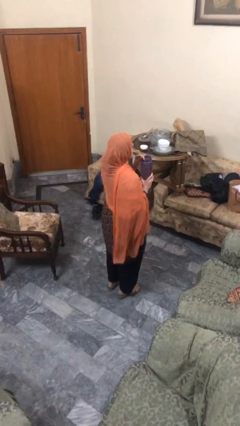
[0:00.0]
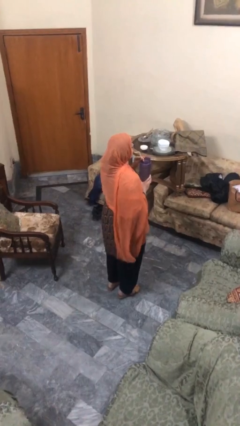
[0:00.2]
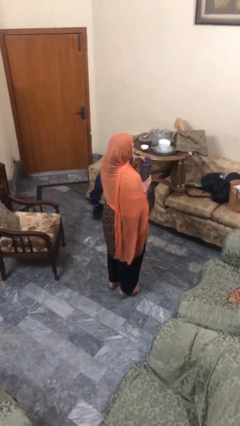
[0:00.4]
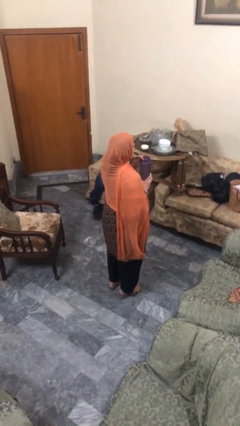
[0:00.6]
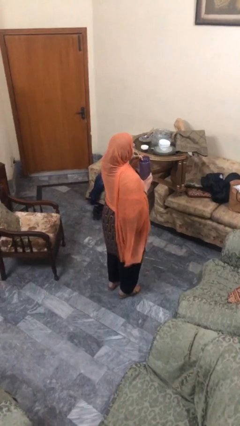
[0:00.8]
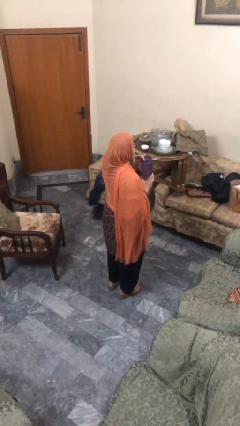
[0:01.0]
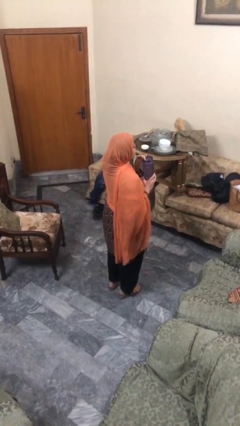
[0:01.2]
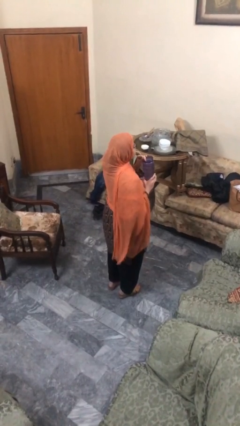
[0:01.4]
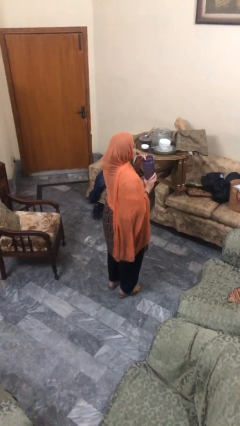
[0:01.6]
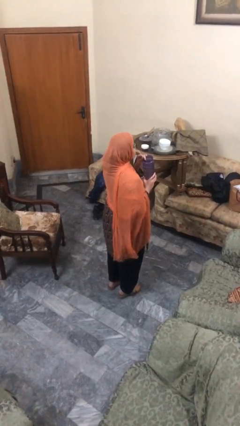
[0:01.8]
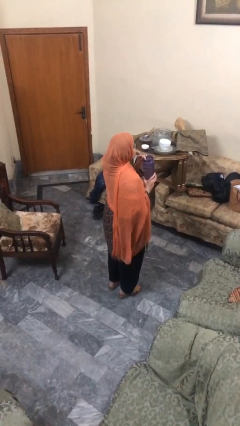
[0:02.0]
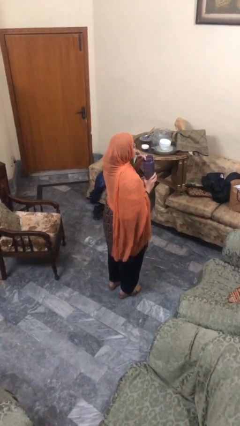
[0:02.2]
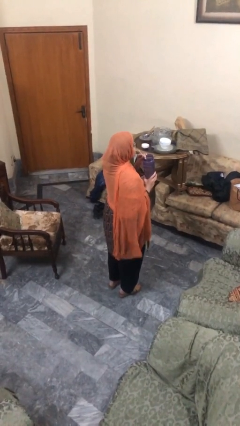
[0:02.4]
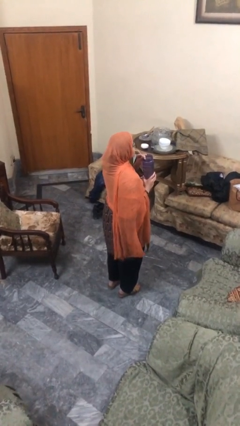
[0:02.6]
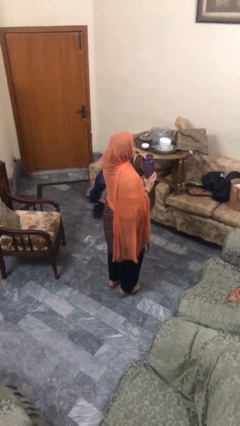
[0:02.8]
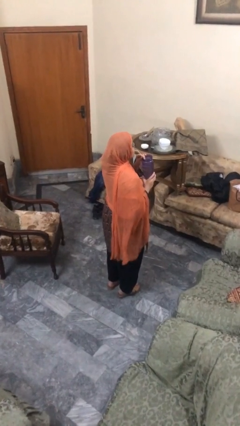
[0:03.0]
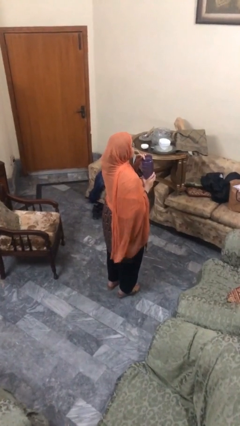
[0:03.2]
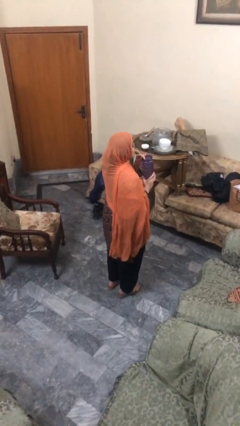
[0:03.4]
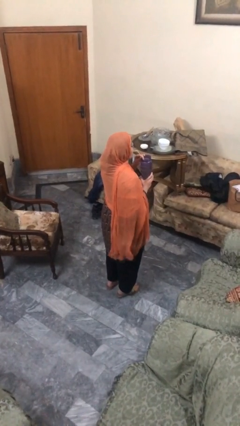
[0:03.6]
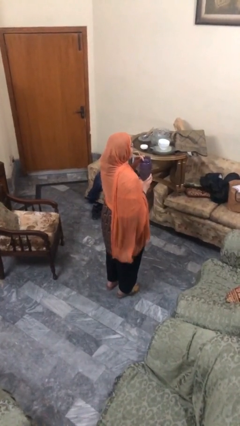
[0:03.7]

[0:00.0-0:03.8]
person drinks from straw

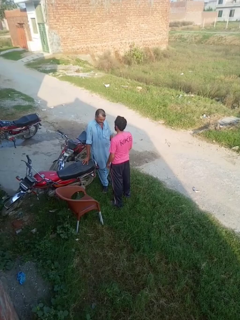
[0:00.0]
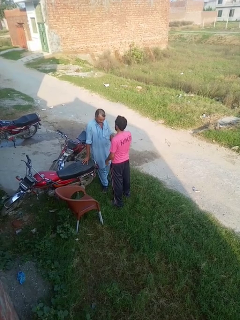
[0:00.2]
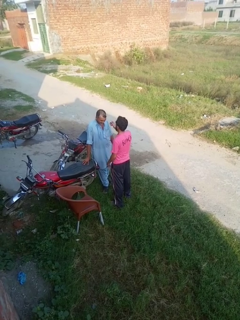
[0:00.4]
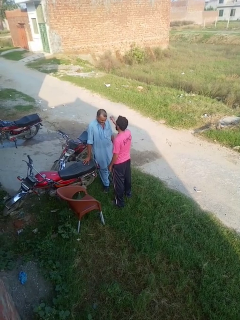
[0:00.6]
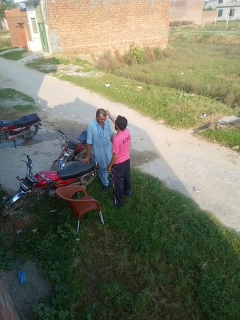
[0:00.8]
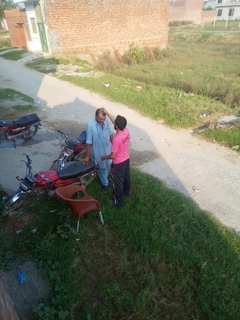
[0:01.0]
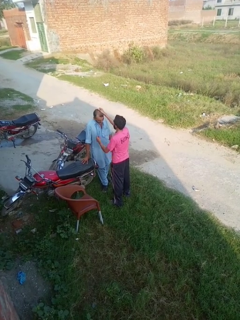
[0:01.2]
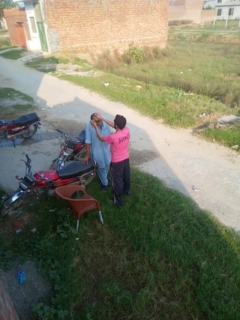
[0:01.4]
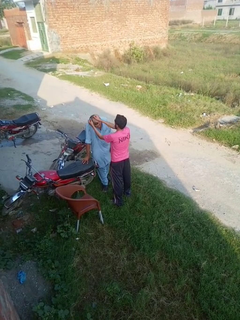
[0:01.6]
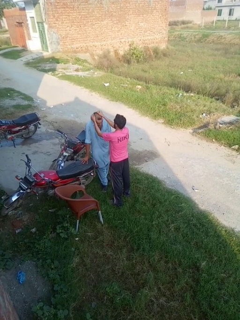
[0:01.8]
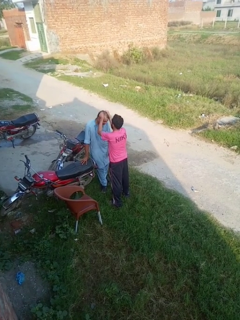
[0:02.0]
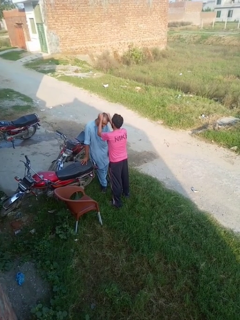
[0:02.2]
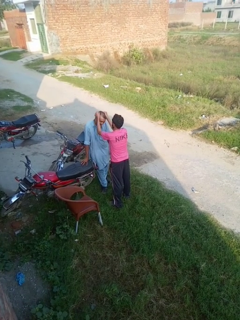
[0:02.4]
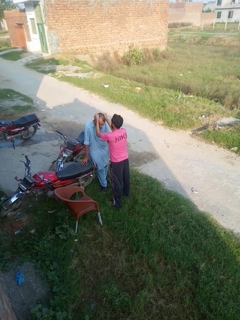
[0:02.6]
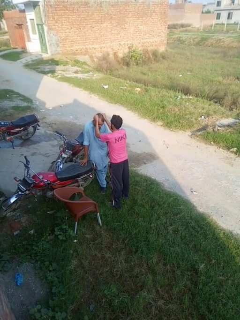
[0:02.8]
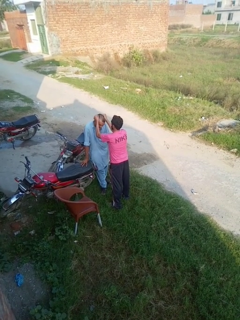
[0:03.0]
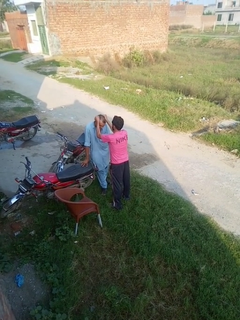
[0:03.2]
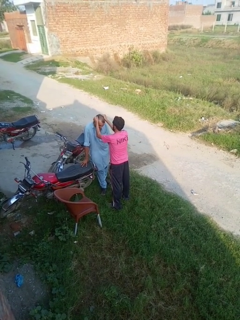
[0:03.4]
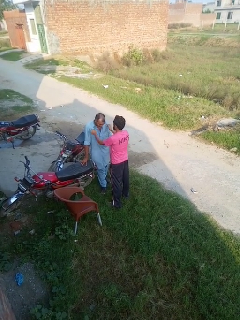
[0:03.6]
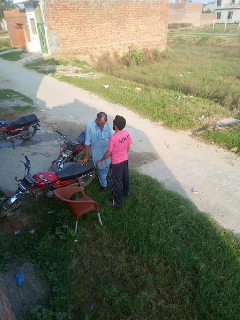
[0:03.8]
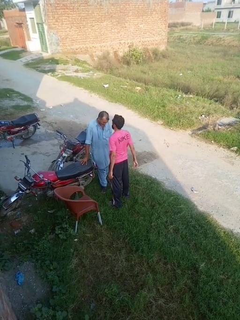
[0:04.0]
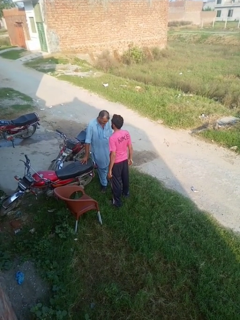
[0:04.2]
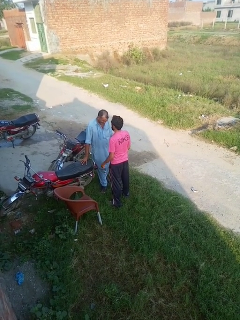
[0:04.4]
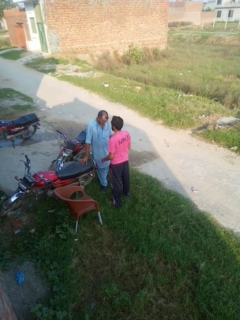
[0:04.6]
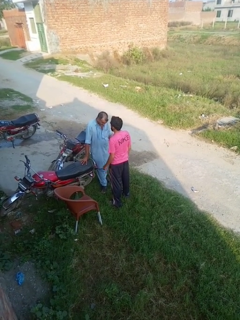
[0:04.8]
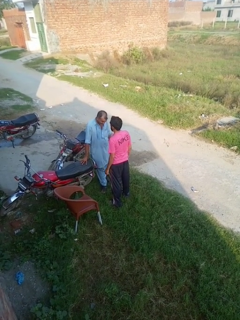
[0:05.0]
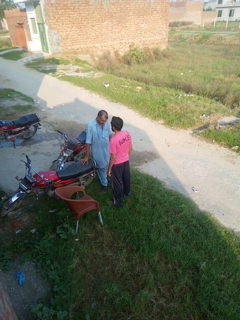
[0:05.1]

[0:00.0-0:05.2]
person grabs person by hair

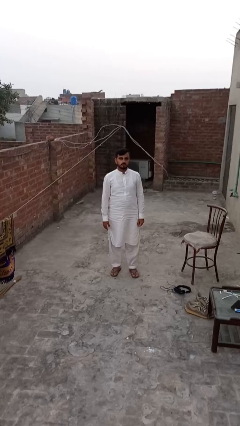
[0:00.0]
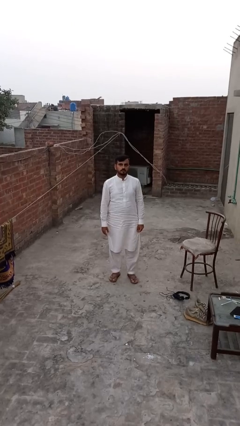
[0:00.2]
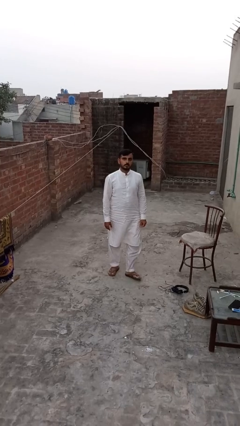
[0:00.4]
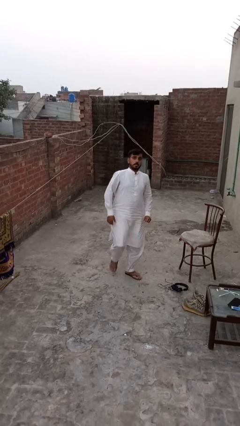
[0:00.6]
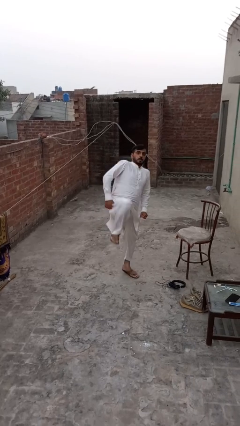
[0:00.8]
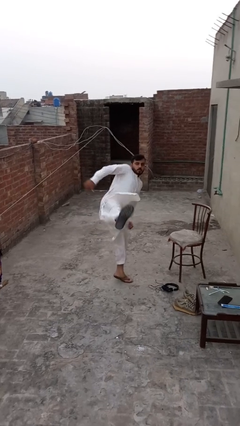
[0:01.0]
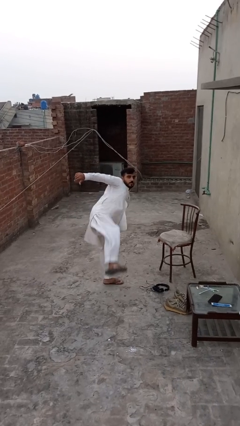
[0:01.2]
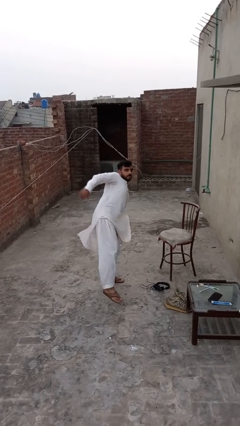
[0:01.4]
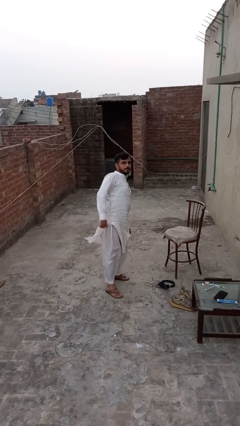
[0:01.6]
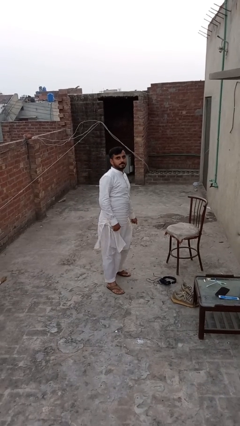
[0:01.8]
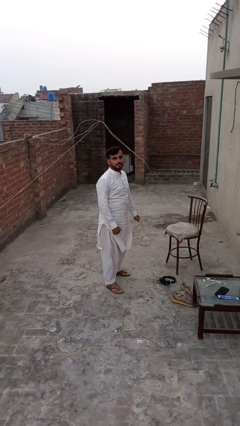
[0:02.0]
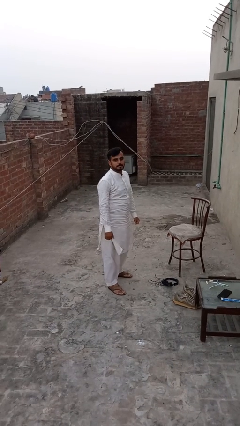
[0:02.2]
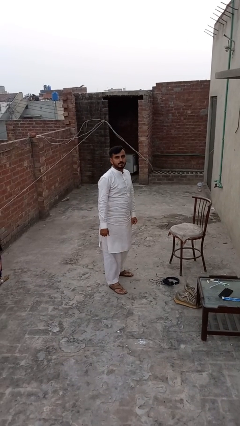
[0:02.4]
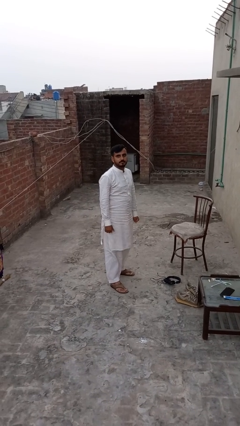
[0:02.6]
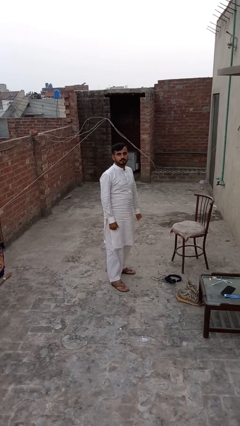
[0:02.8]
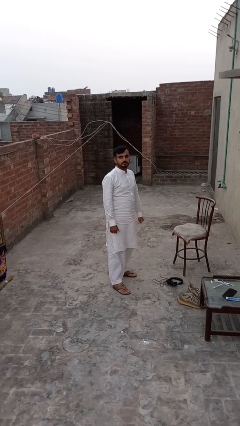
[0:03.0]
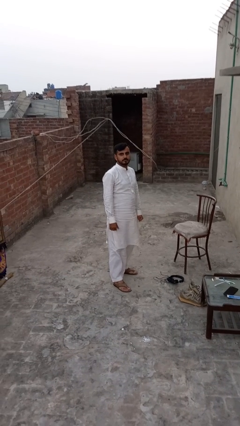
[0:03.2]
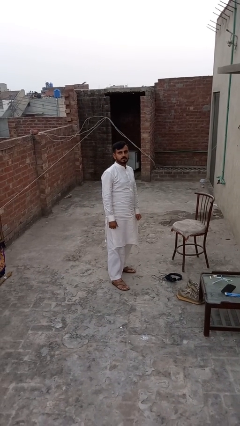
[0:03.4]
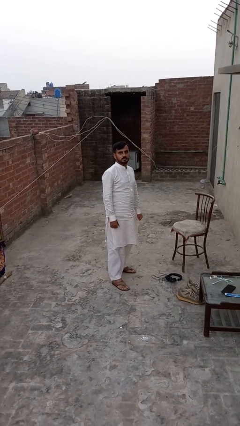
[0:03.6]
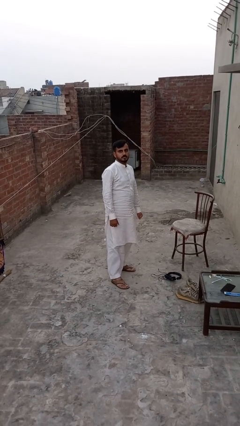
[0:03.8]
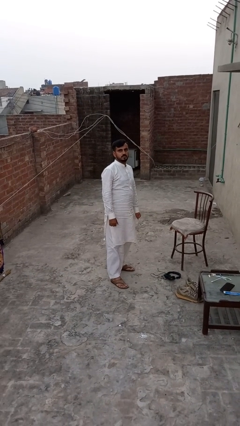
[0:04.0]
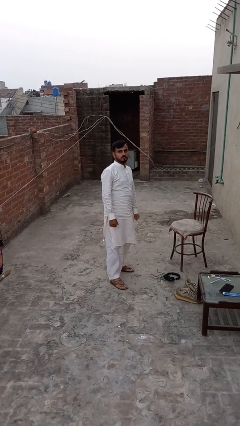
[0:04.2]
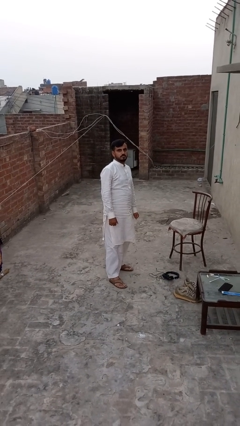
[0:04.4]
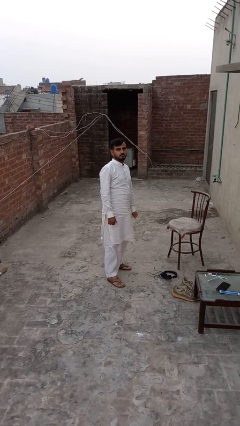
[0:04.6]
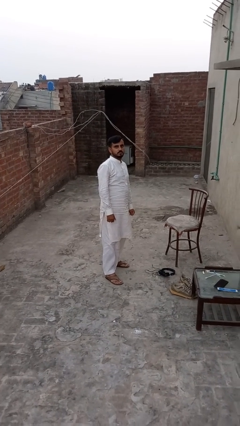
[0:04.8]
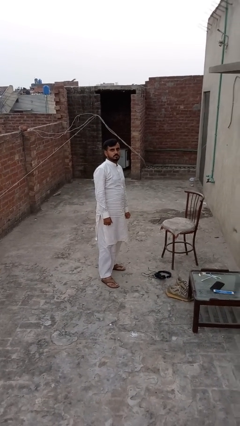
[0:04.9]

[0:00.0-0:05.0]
person karate kicks

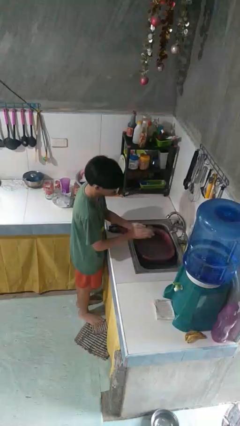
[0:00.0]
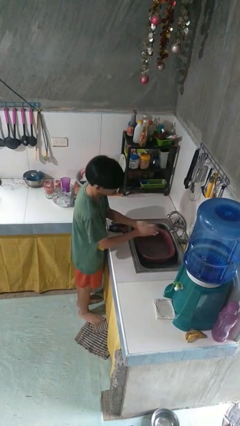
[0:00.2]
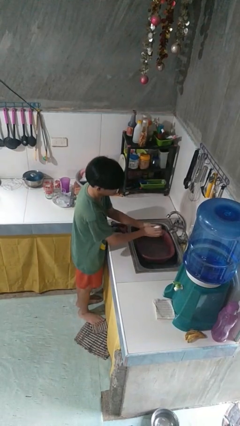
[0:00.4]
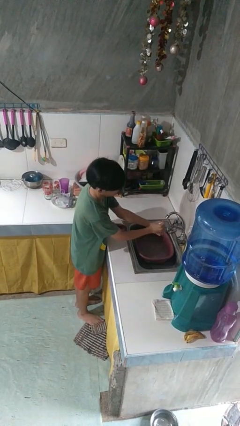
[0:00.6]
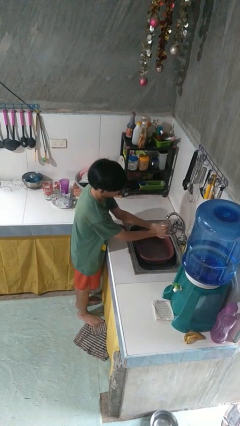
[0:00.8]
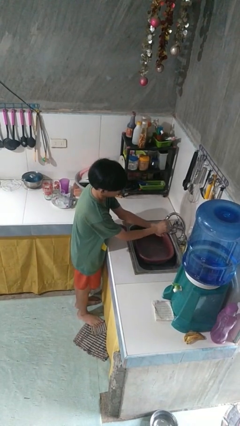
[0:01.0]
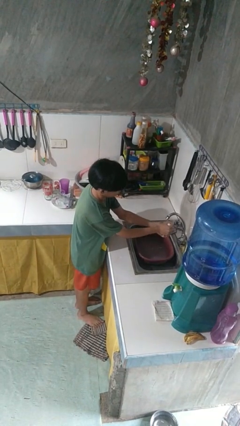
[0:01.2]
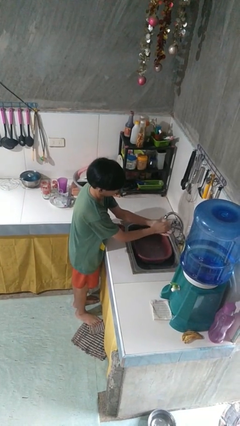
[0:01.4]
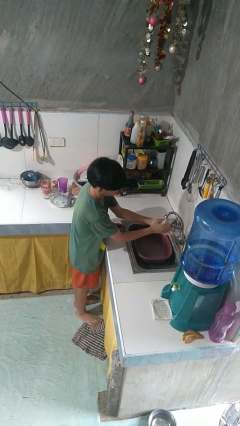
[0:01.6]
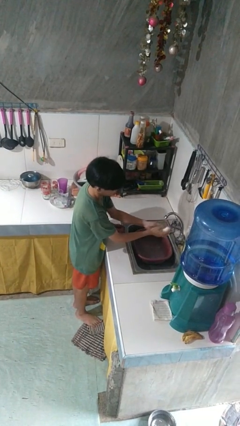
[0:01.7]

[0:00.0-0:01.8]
person washes hands

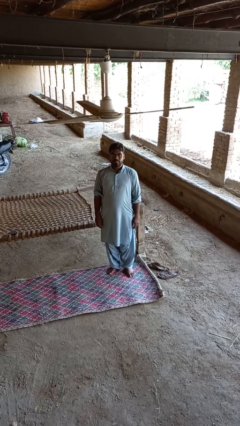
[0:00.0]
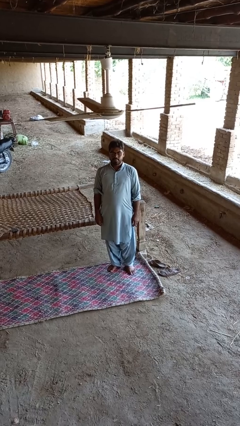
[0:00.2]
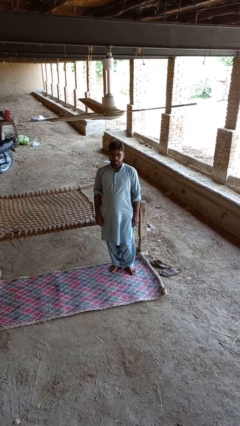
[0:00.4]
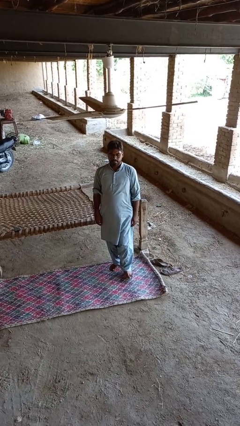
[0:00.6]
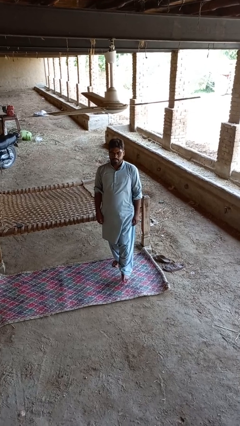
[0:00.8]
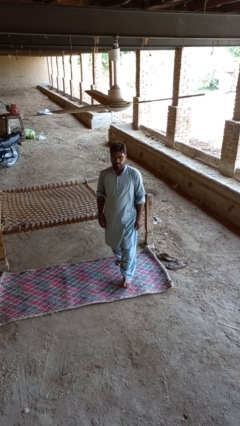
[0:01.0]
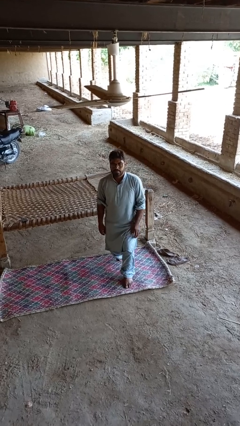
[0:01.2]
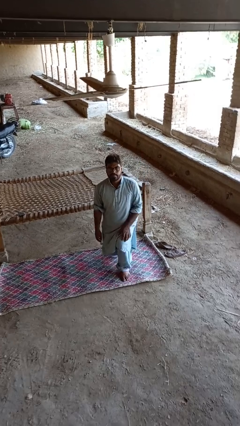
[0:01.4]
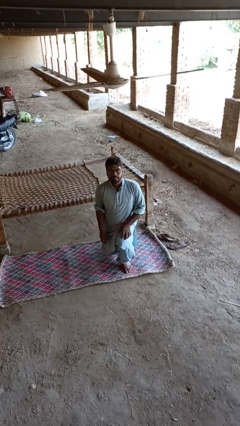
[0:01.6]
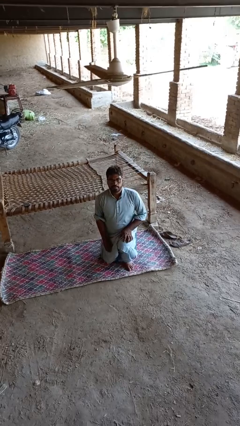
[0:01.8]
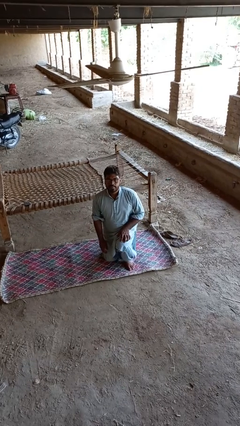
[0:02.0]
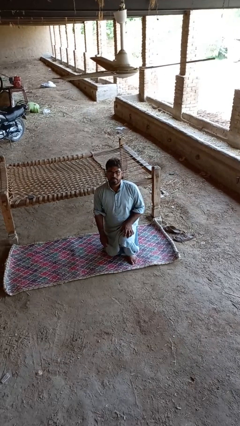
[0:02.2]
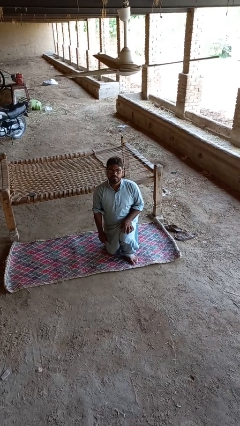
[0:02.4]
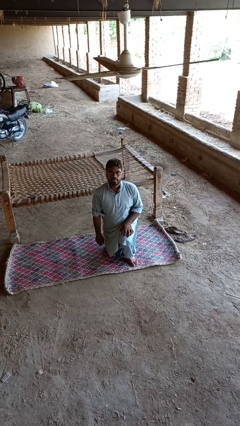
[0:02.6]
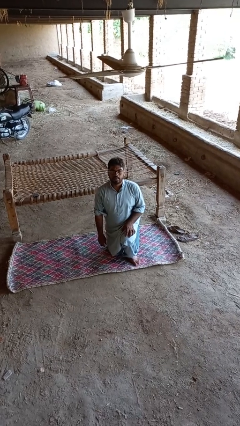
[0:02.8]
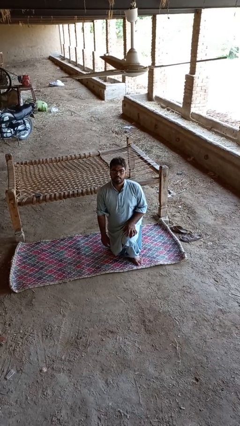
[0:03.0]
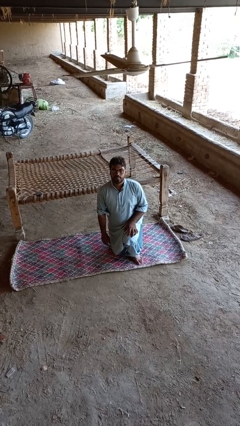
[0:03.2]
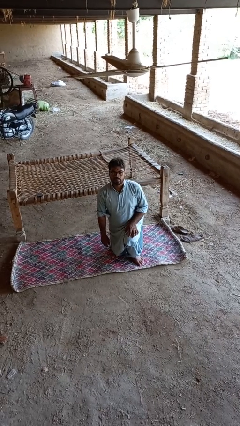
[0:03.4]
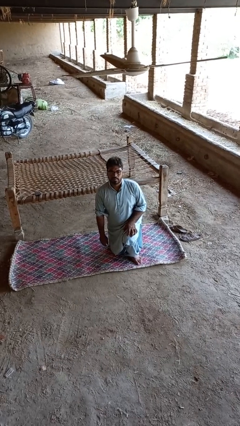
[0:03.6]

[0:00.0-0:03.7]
person kneels
